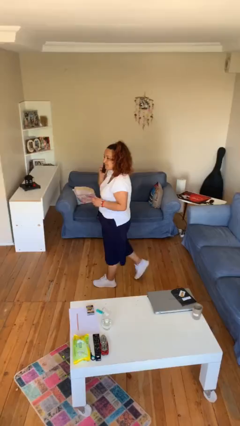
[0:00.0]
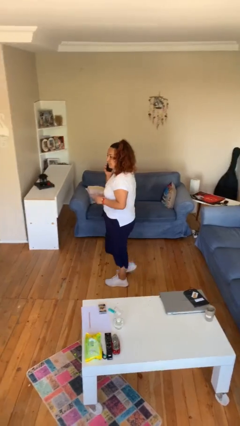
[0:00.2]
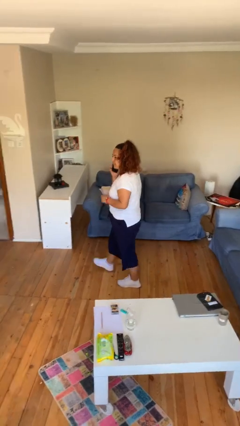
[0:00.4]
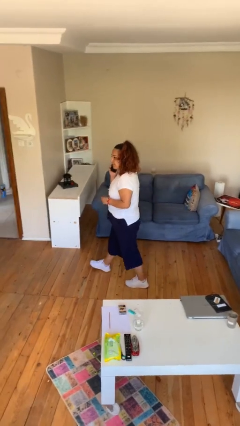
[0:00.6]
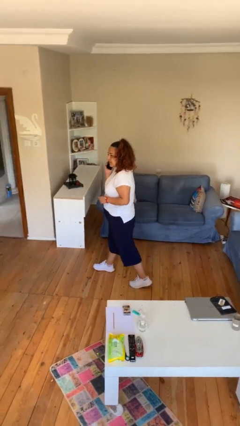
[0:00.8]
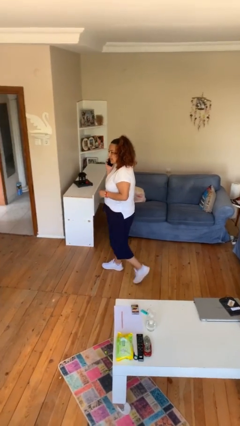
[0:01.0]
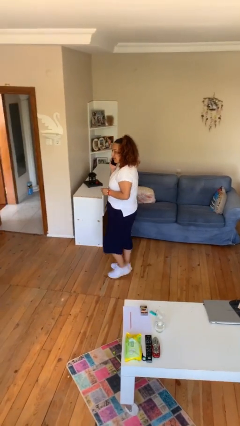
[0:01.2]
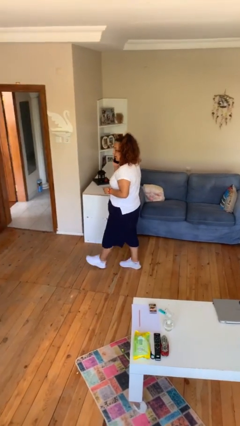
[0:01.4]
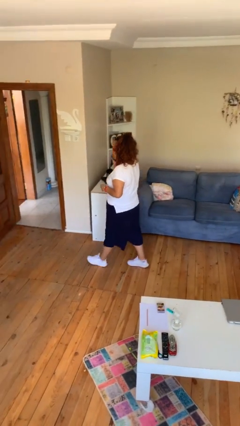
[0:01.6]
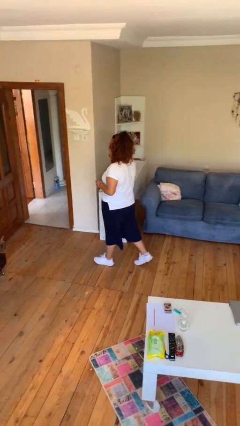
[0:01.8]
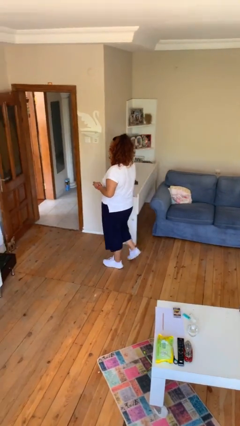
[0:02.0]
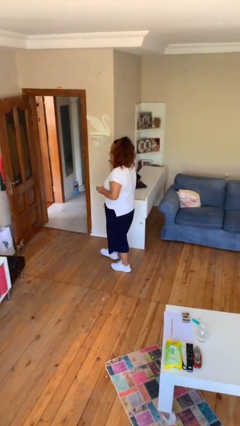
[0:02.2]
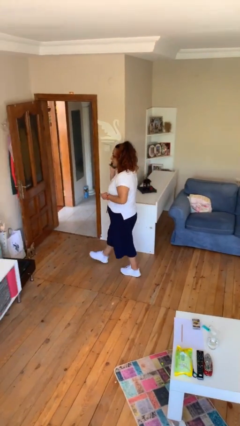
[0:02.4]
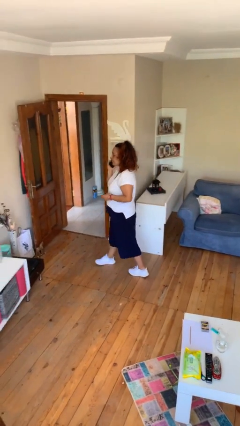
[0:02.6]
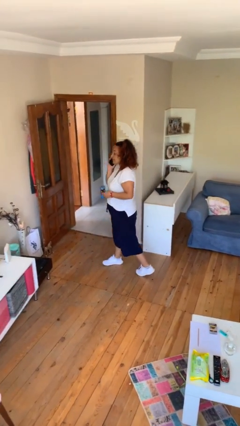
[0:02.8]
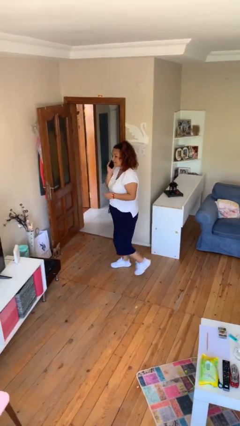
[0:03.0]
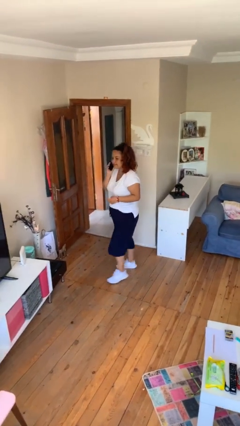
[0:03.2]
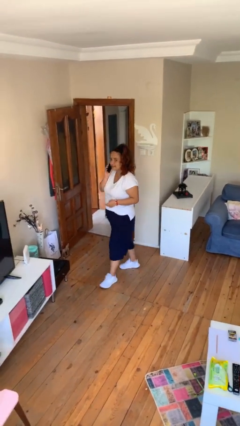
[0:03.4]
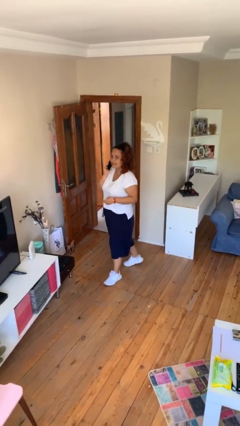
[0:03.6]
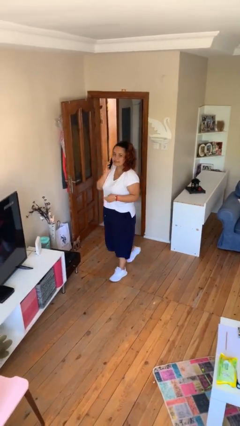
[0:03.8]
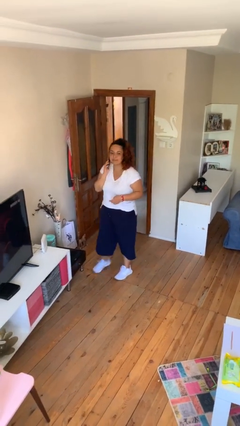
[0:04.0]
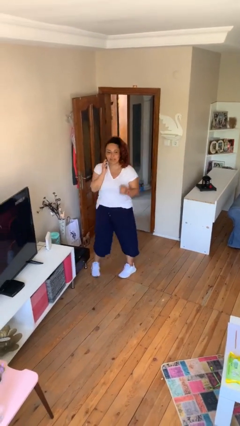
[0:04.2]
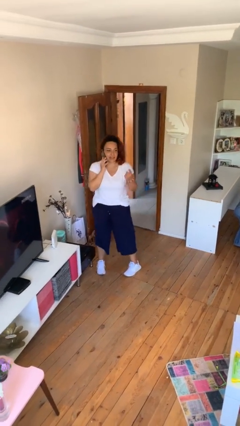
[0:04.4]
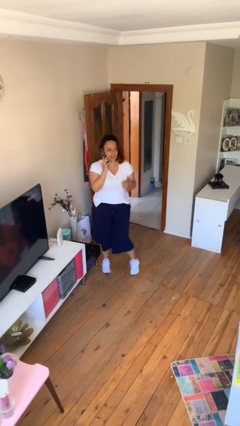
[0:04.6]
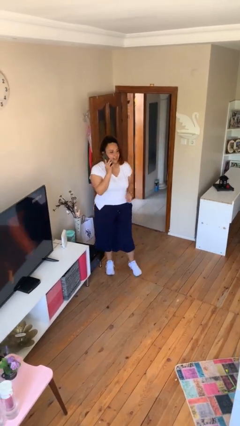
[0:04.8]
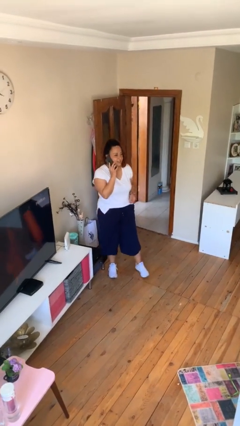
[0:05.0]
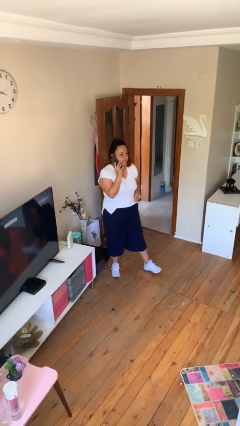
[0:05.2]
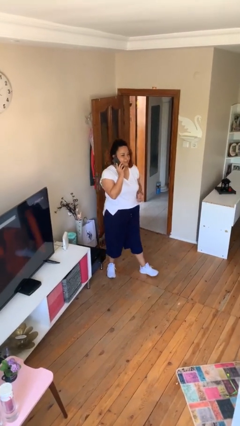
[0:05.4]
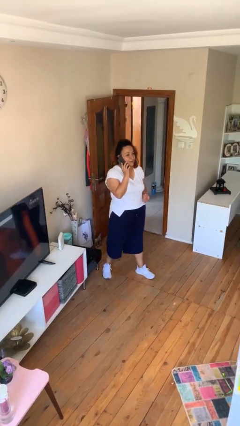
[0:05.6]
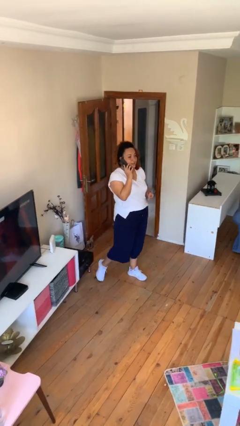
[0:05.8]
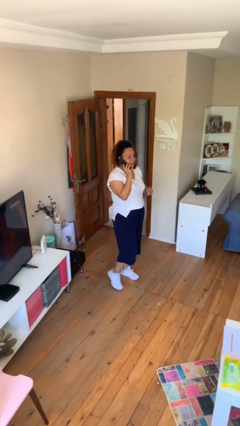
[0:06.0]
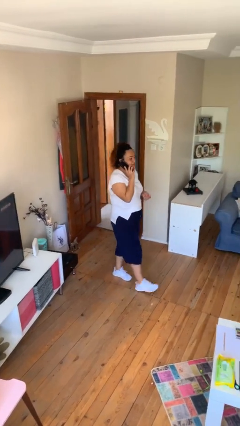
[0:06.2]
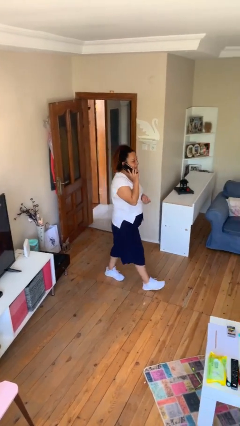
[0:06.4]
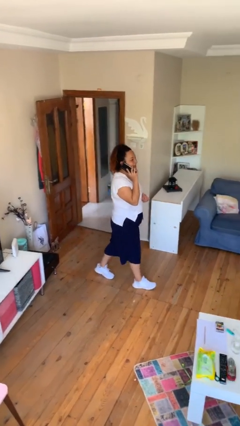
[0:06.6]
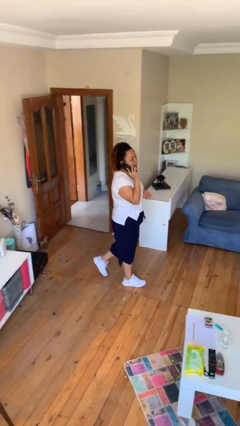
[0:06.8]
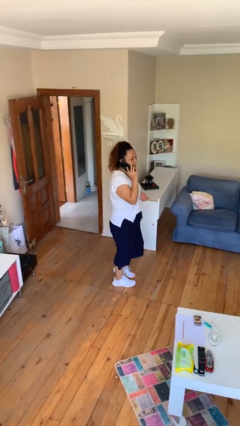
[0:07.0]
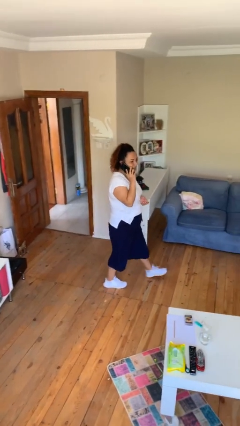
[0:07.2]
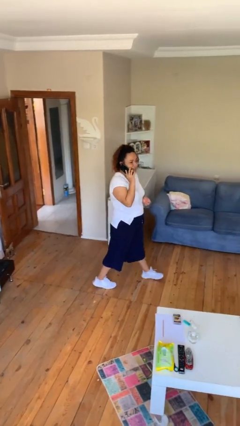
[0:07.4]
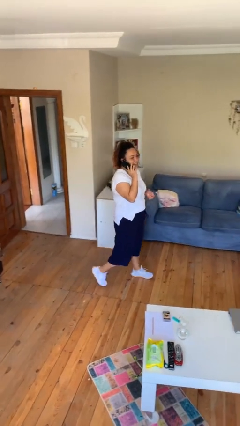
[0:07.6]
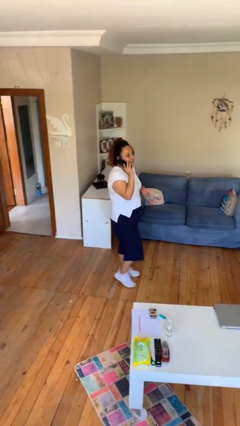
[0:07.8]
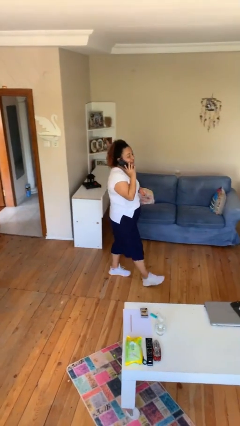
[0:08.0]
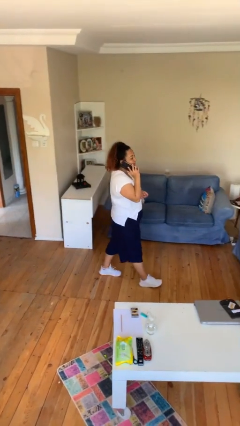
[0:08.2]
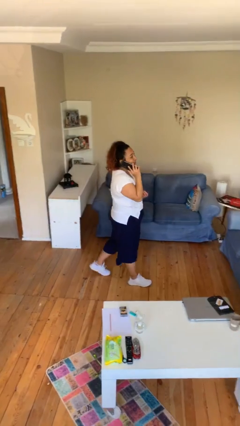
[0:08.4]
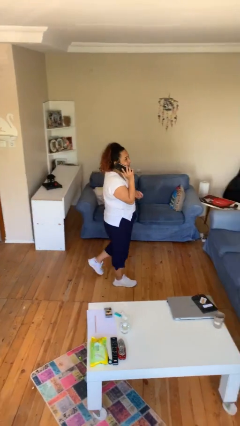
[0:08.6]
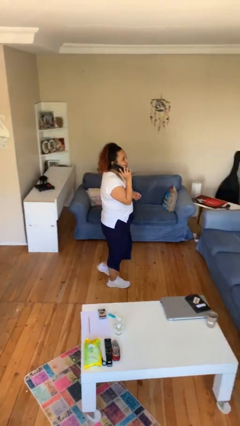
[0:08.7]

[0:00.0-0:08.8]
person talks on phone

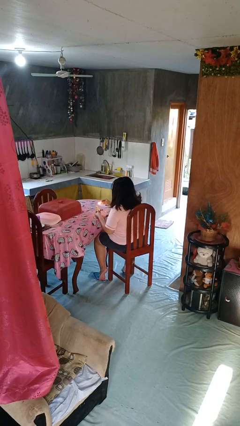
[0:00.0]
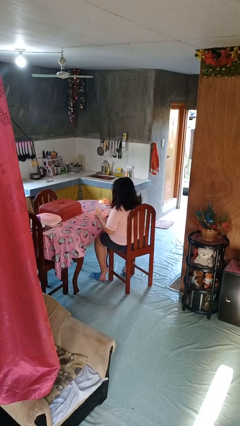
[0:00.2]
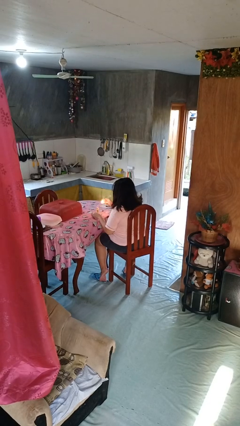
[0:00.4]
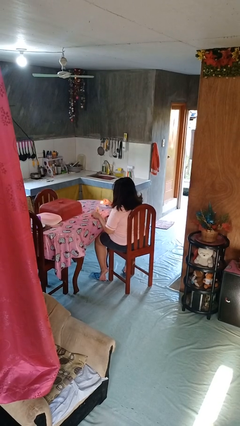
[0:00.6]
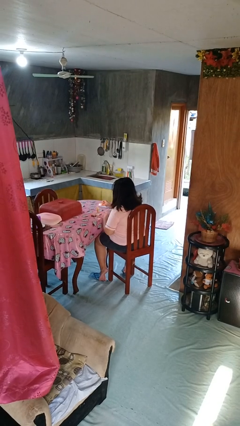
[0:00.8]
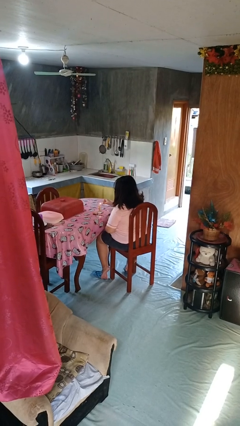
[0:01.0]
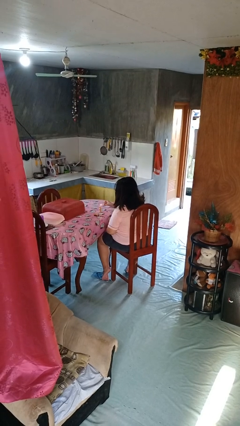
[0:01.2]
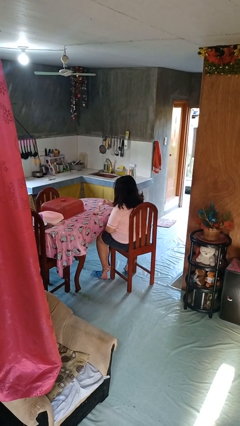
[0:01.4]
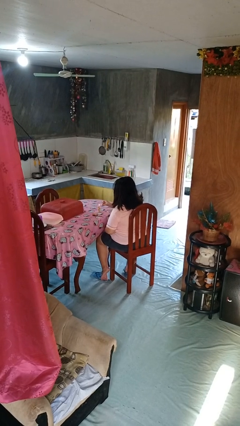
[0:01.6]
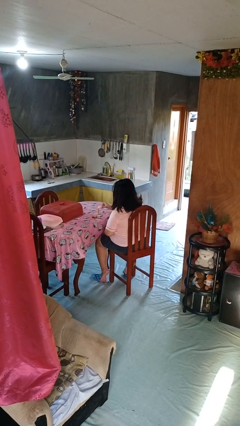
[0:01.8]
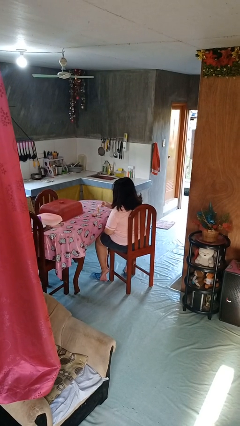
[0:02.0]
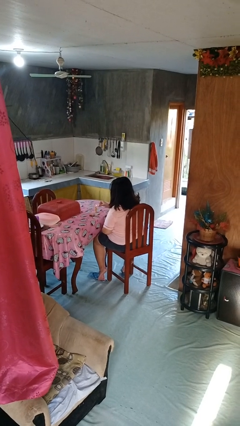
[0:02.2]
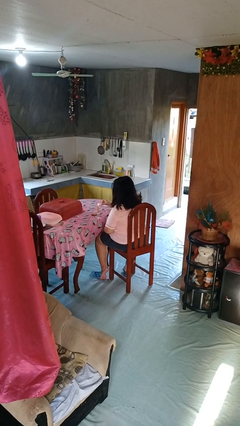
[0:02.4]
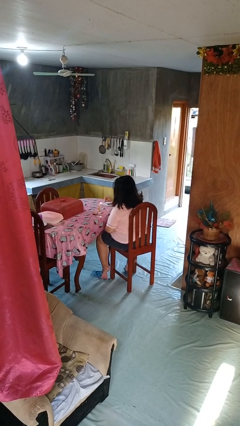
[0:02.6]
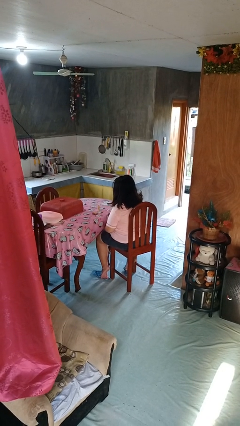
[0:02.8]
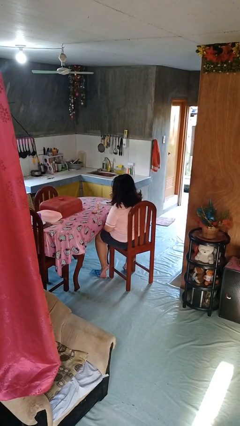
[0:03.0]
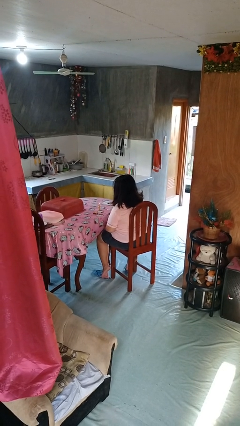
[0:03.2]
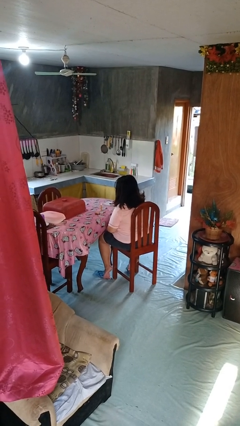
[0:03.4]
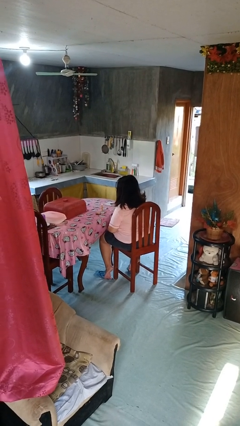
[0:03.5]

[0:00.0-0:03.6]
person lights candle

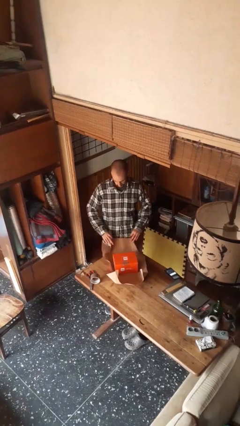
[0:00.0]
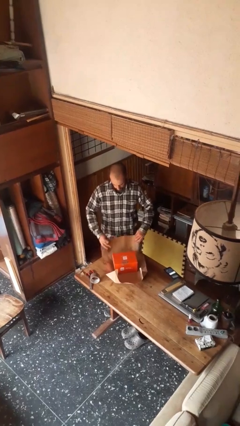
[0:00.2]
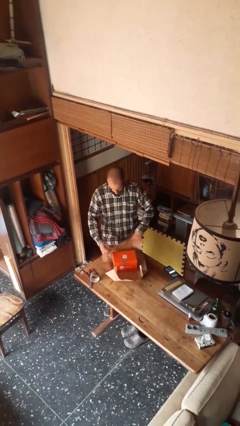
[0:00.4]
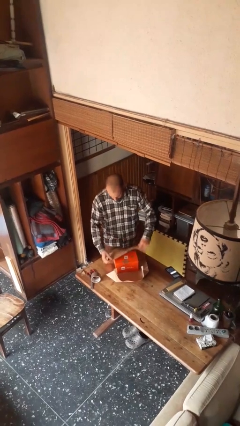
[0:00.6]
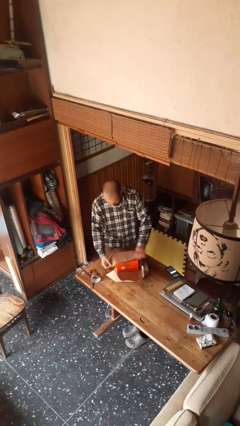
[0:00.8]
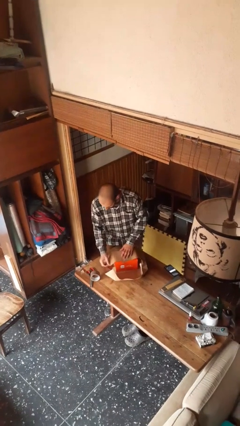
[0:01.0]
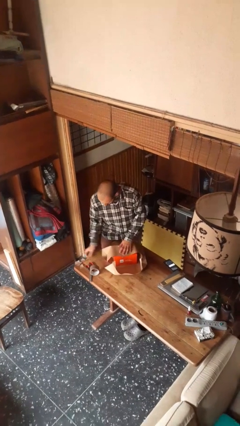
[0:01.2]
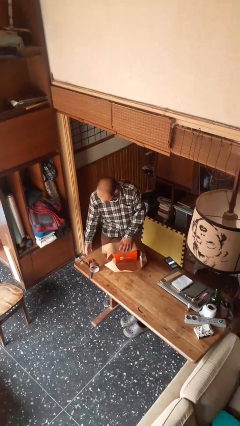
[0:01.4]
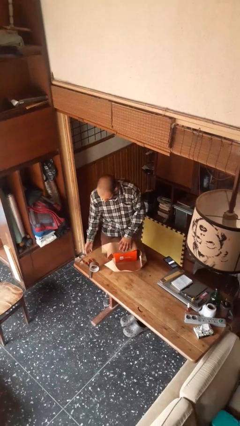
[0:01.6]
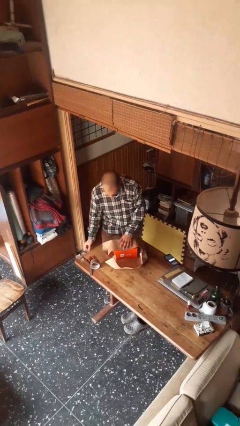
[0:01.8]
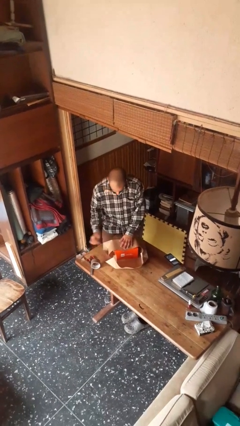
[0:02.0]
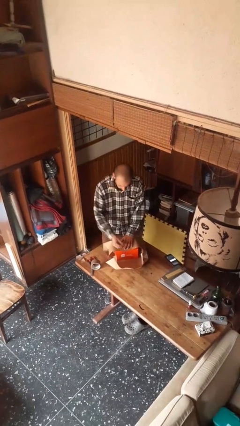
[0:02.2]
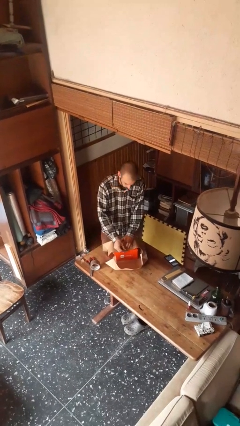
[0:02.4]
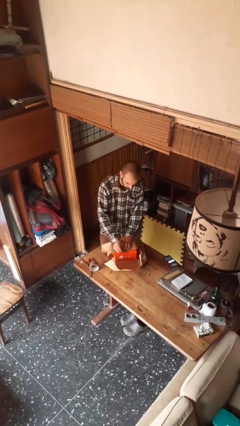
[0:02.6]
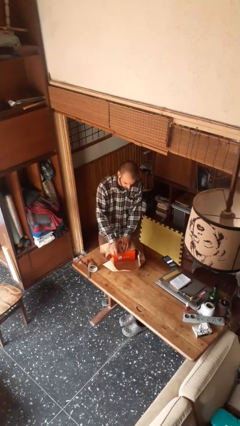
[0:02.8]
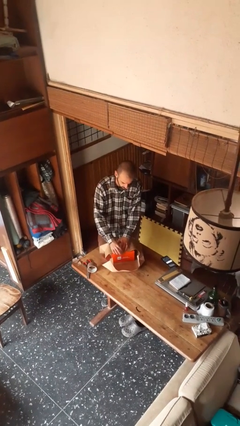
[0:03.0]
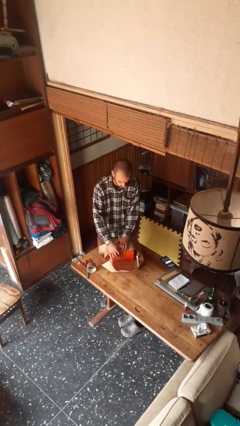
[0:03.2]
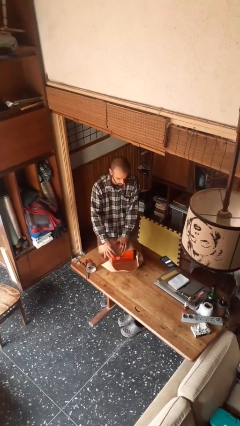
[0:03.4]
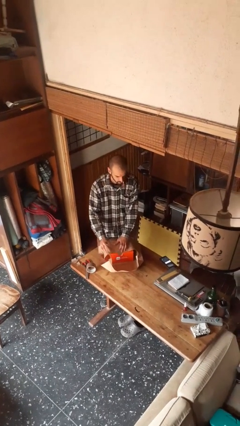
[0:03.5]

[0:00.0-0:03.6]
person wraps box

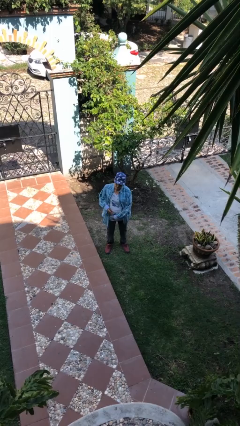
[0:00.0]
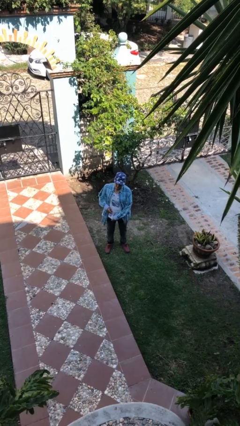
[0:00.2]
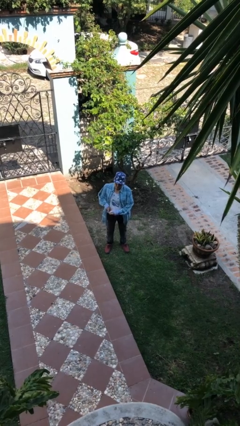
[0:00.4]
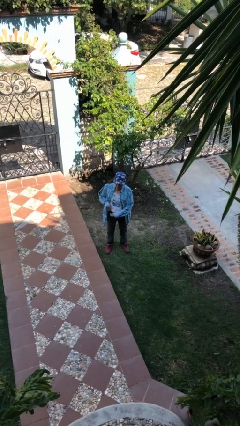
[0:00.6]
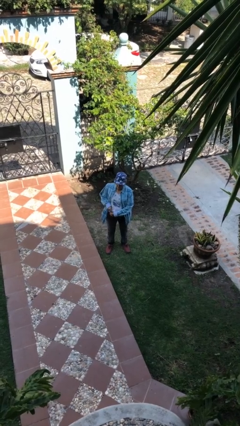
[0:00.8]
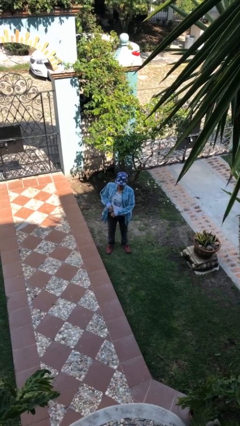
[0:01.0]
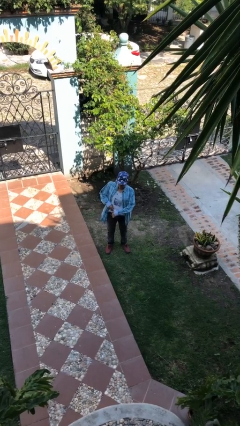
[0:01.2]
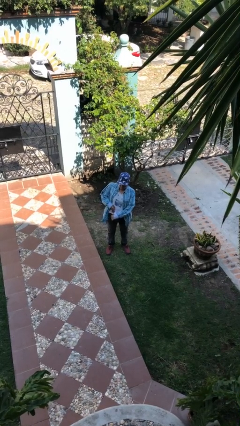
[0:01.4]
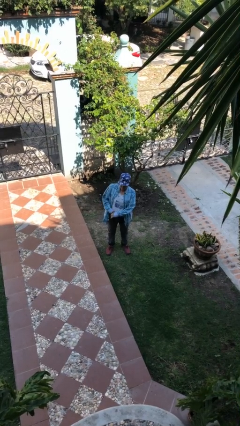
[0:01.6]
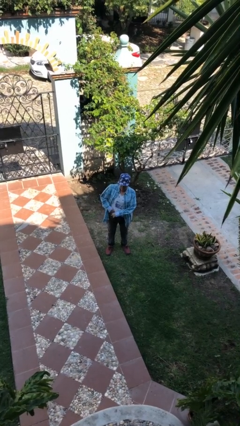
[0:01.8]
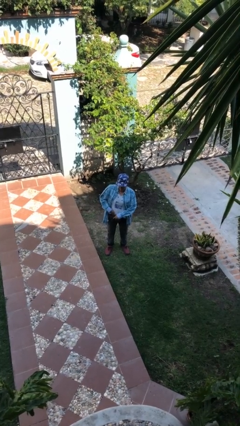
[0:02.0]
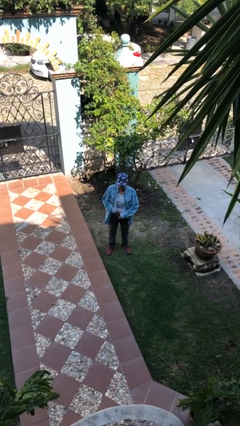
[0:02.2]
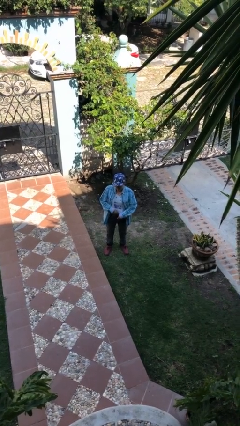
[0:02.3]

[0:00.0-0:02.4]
person tucks in shirt
